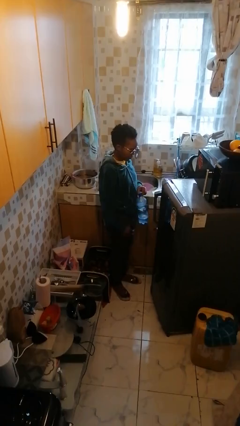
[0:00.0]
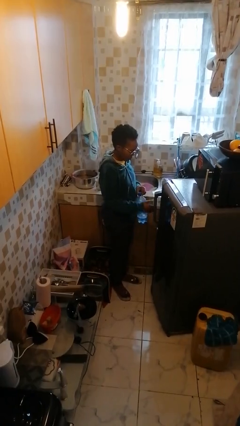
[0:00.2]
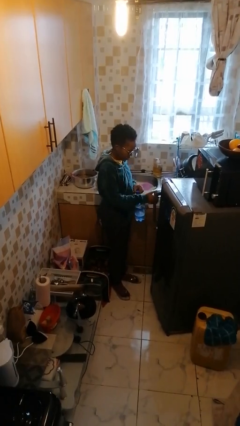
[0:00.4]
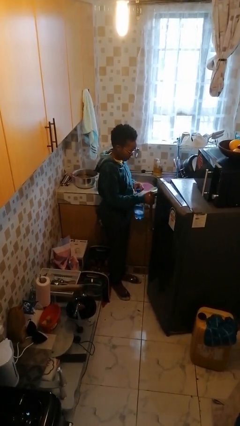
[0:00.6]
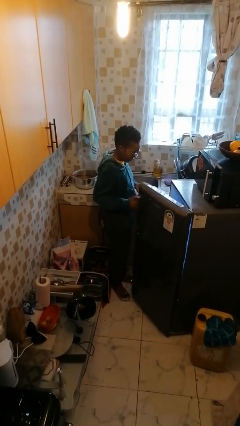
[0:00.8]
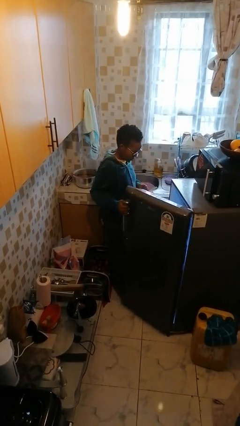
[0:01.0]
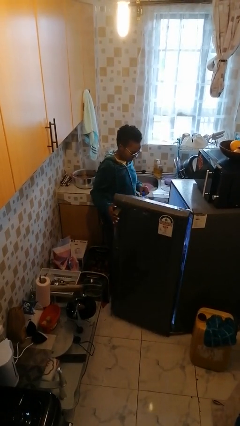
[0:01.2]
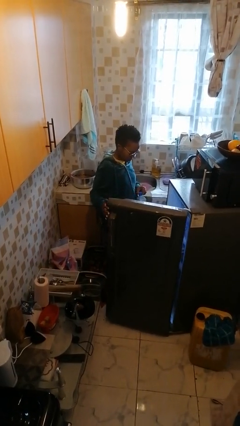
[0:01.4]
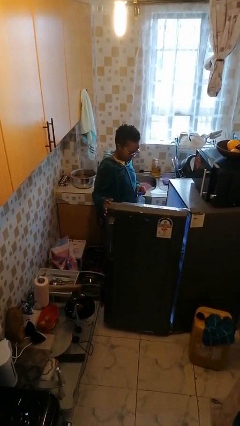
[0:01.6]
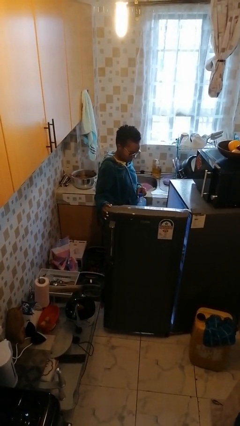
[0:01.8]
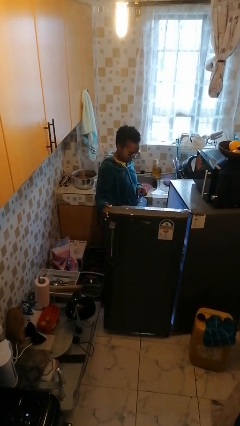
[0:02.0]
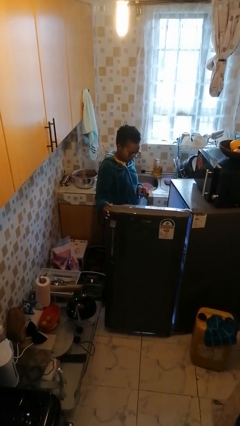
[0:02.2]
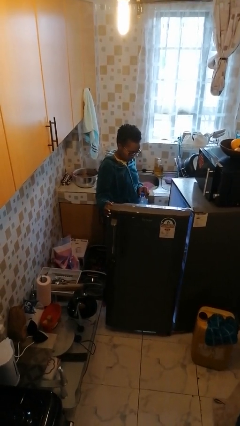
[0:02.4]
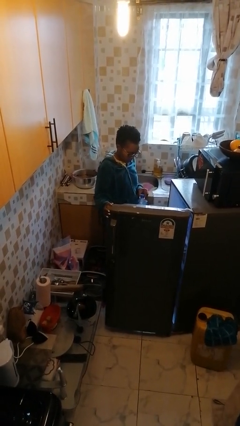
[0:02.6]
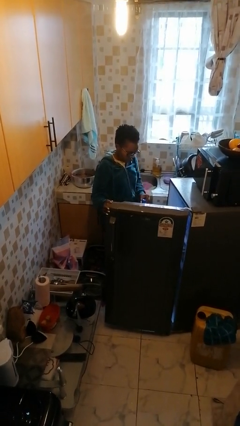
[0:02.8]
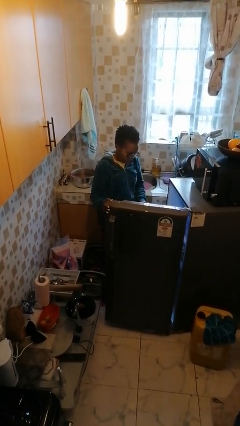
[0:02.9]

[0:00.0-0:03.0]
person opens refrigerator

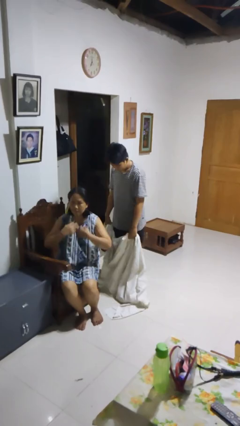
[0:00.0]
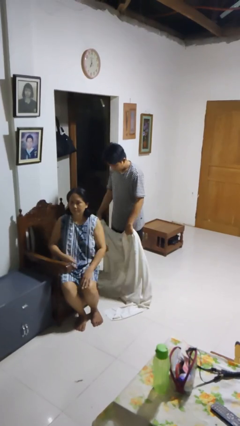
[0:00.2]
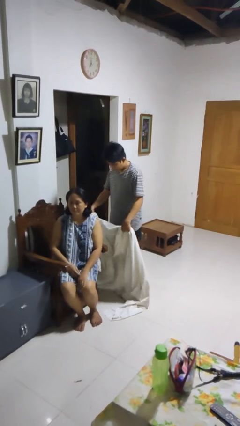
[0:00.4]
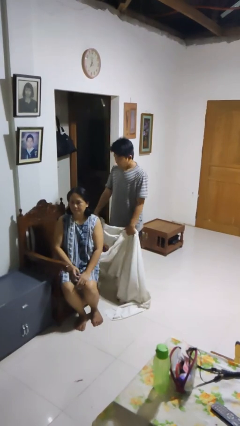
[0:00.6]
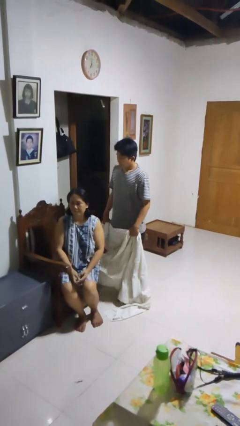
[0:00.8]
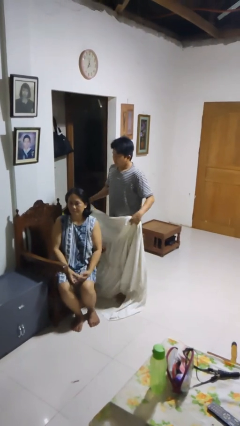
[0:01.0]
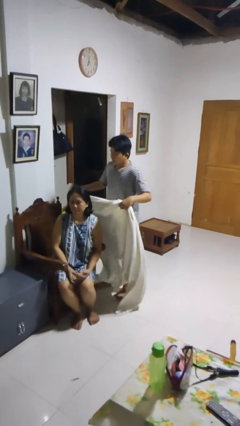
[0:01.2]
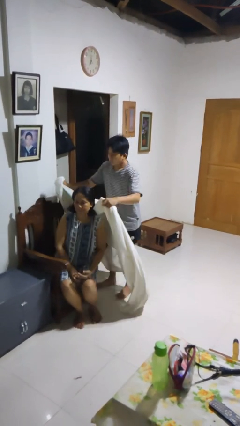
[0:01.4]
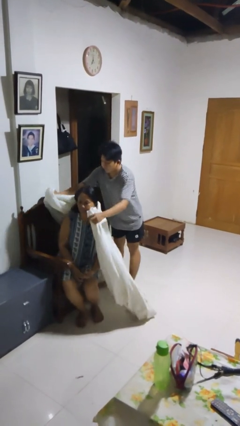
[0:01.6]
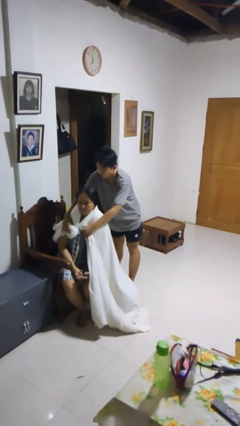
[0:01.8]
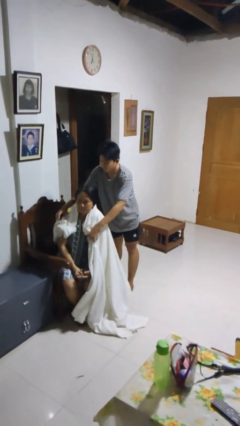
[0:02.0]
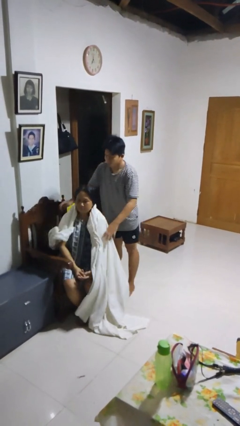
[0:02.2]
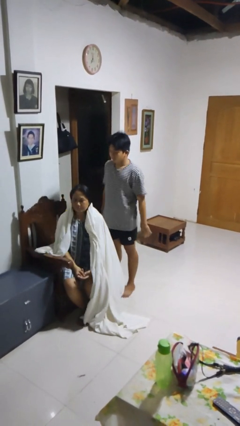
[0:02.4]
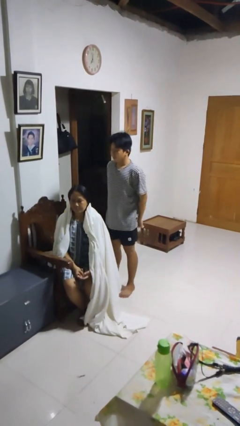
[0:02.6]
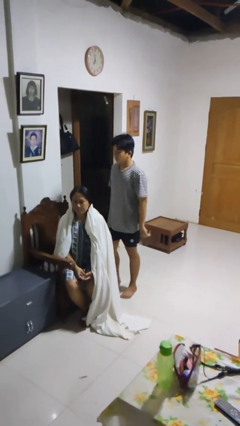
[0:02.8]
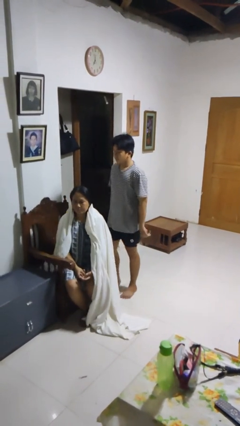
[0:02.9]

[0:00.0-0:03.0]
person covers friend with blanket

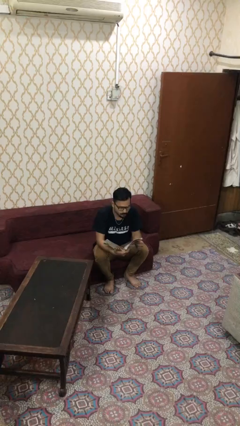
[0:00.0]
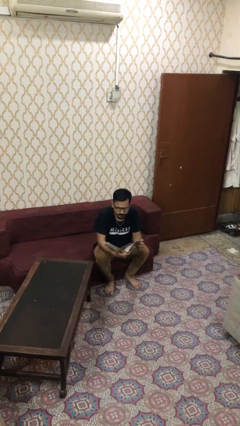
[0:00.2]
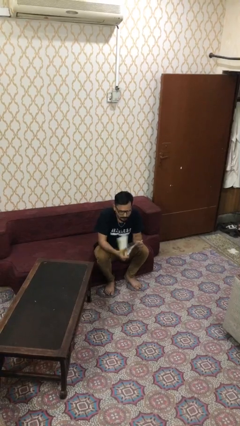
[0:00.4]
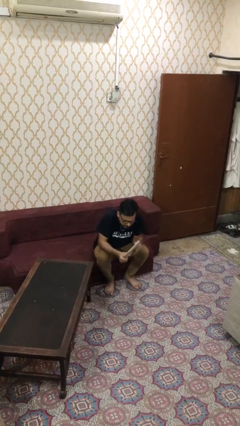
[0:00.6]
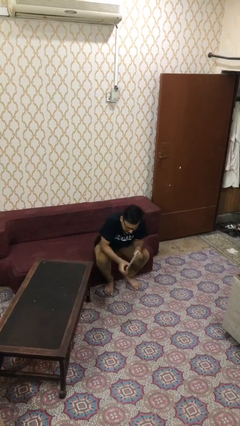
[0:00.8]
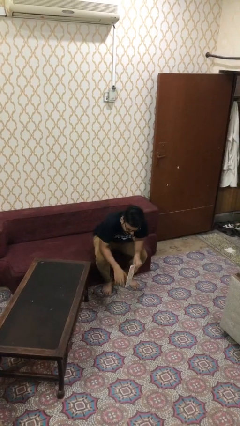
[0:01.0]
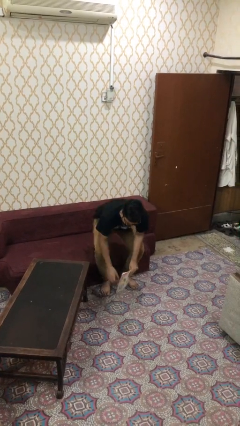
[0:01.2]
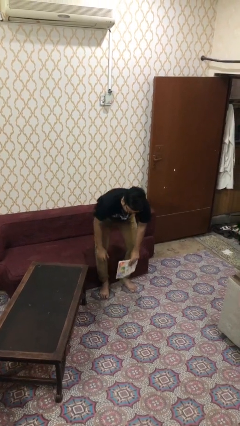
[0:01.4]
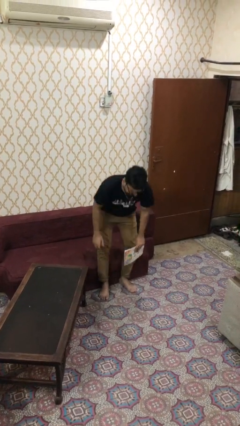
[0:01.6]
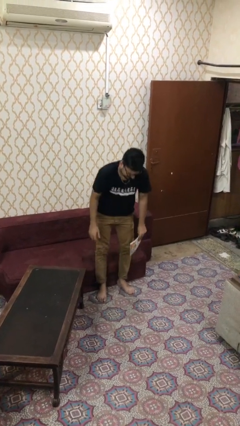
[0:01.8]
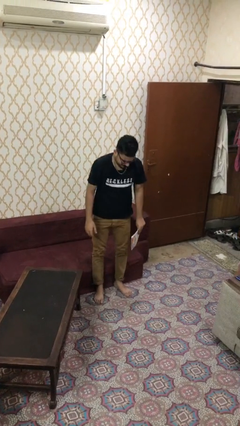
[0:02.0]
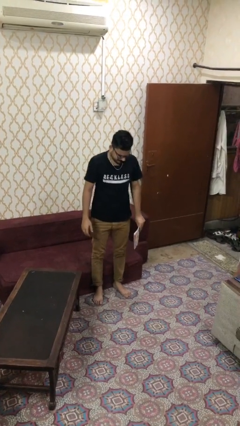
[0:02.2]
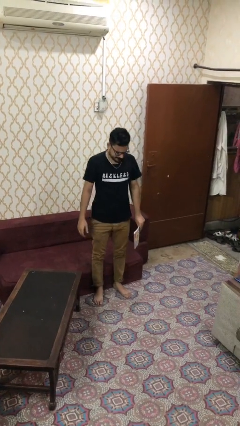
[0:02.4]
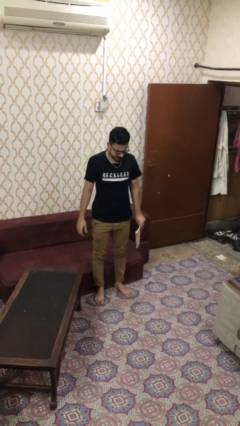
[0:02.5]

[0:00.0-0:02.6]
person stands up

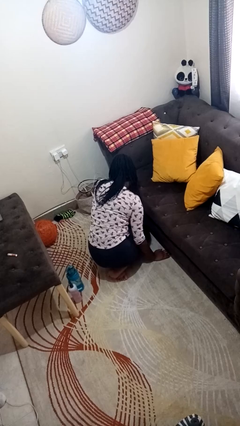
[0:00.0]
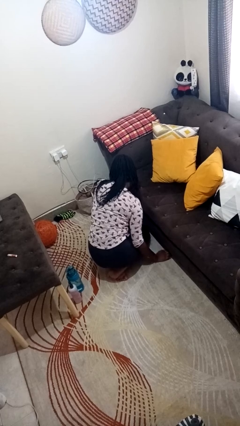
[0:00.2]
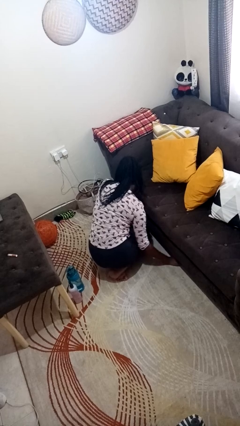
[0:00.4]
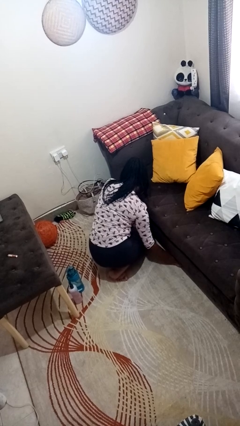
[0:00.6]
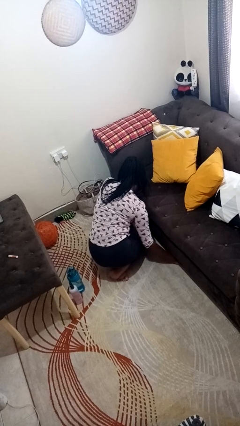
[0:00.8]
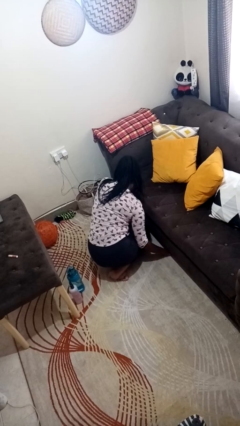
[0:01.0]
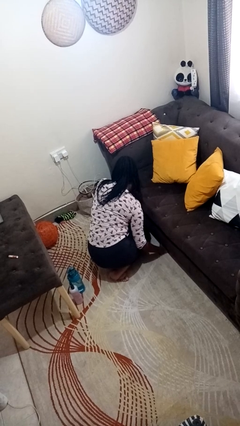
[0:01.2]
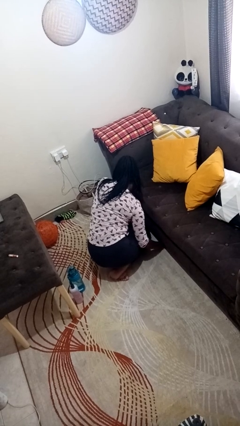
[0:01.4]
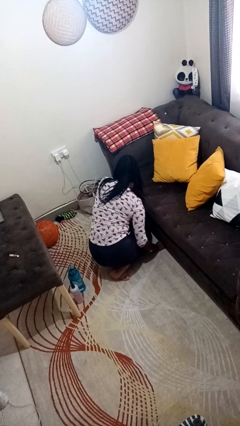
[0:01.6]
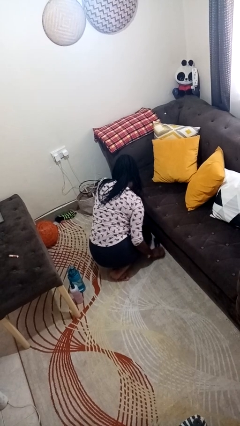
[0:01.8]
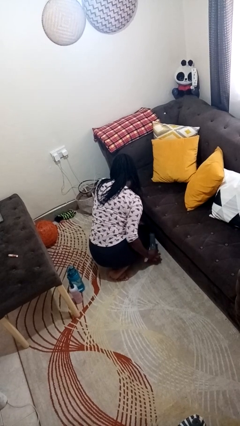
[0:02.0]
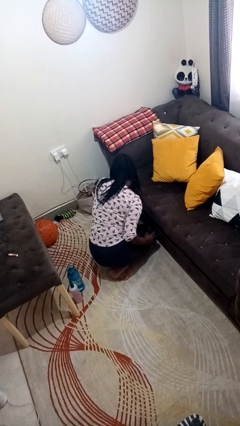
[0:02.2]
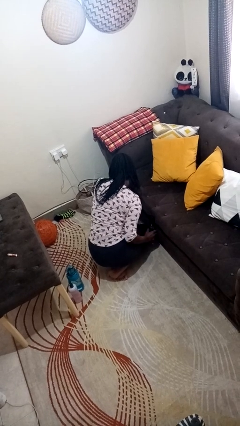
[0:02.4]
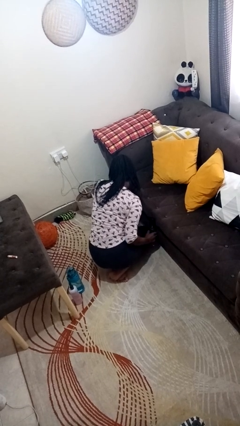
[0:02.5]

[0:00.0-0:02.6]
person searches under couch

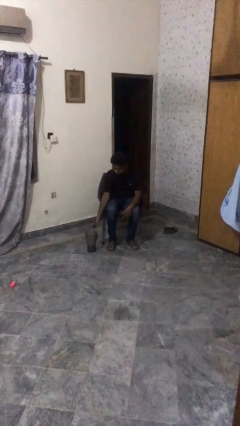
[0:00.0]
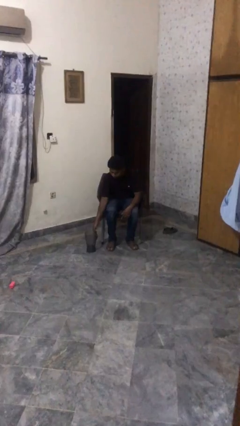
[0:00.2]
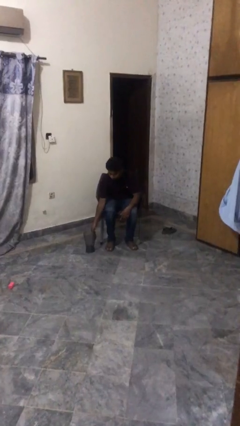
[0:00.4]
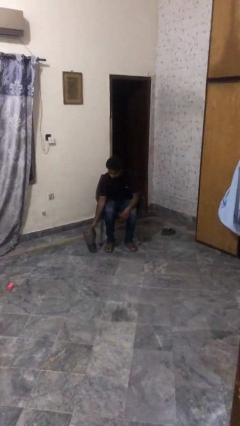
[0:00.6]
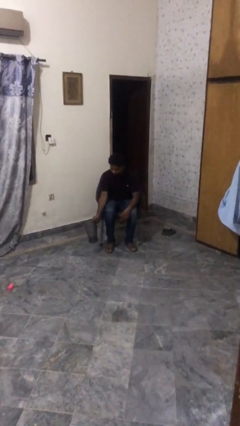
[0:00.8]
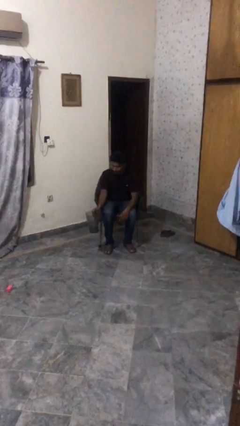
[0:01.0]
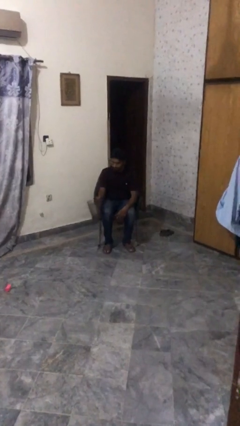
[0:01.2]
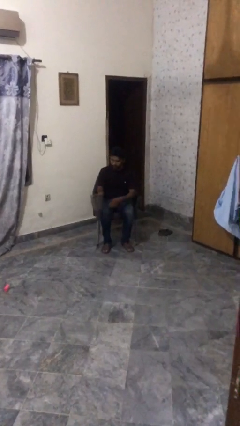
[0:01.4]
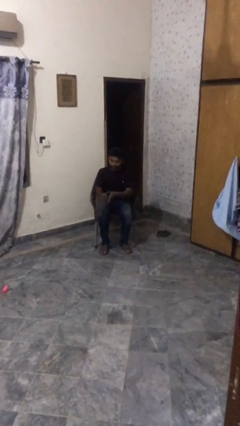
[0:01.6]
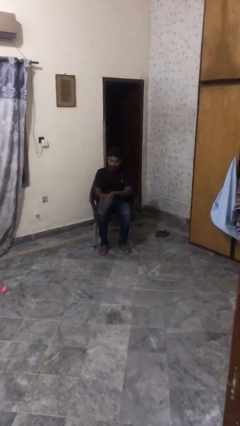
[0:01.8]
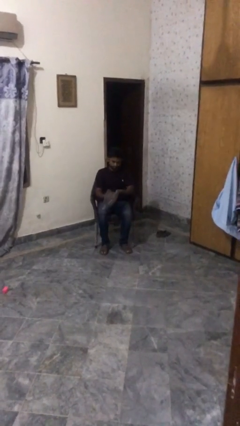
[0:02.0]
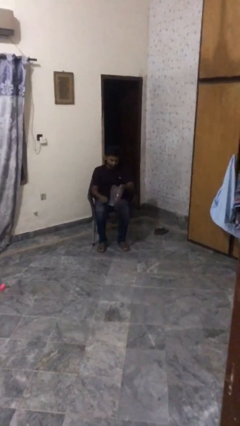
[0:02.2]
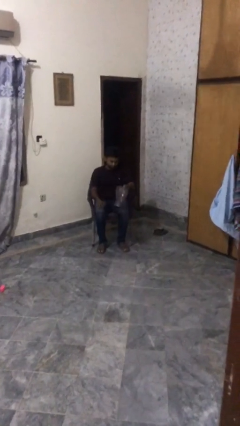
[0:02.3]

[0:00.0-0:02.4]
person picks up object from floor

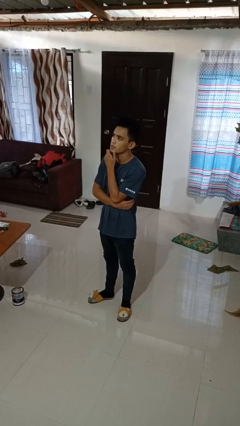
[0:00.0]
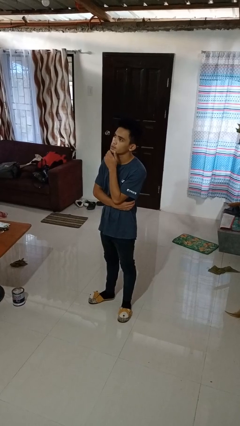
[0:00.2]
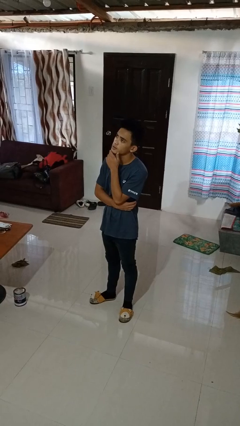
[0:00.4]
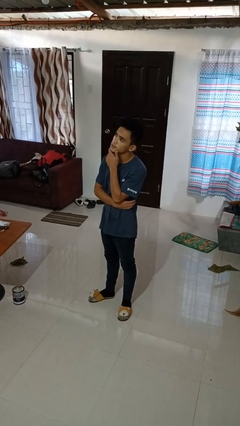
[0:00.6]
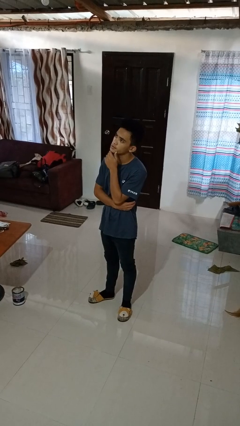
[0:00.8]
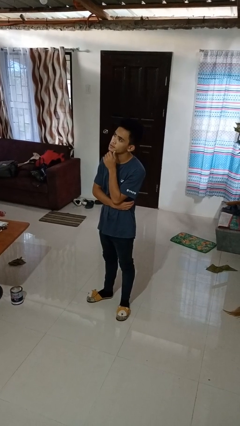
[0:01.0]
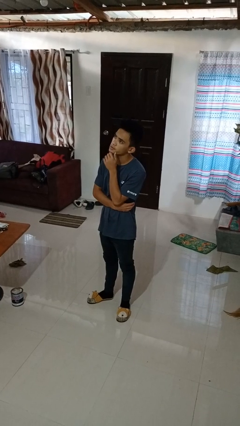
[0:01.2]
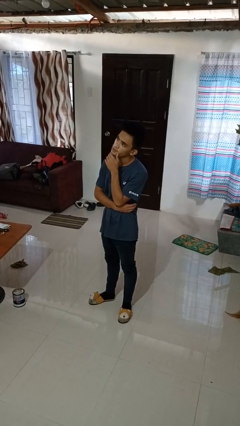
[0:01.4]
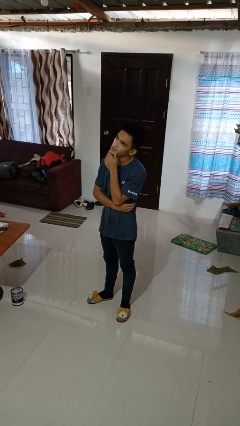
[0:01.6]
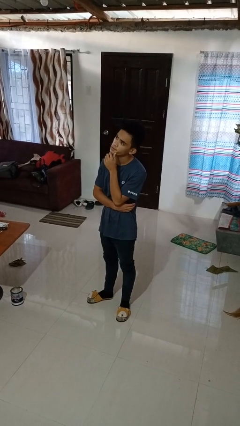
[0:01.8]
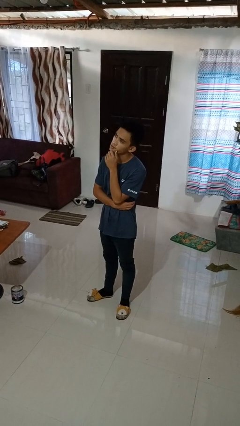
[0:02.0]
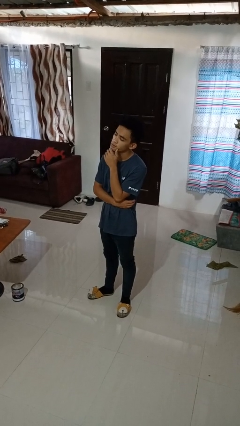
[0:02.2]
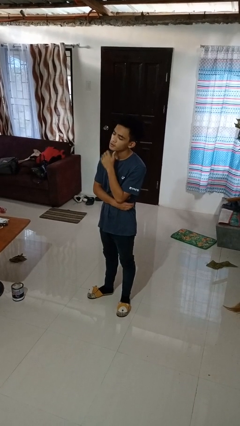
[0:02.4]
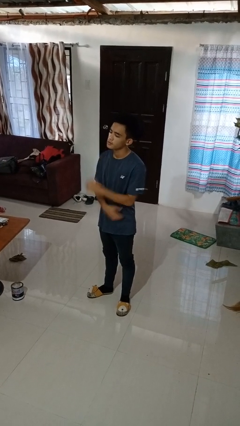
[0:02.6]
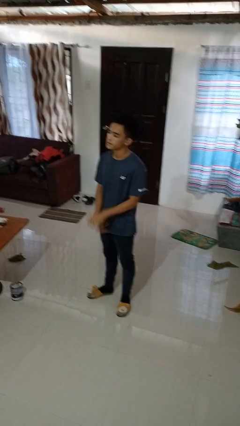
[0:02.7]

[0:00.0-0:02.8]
person strokes chin

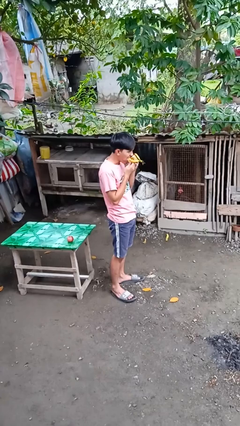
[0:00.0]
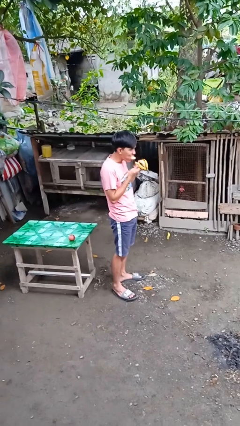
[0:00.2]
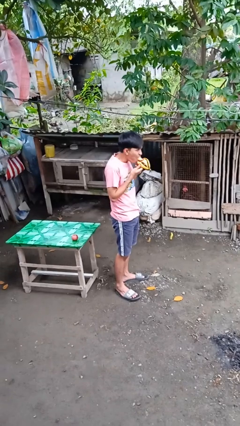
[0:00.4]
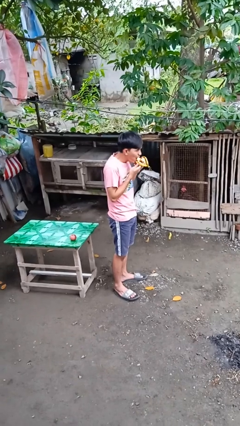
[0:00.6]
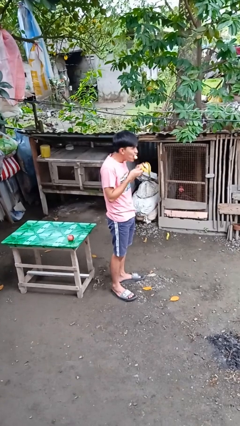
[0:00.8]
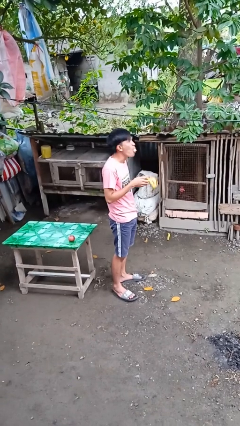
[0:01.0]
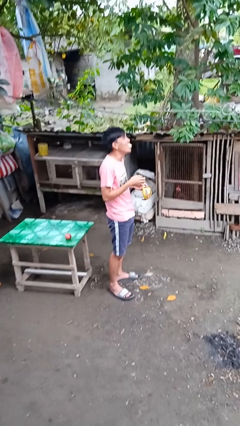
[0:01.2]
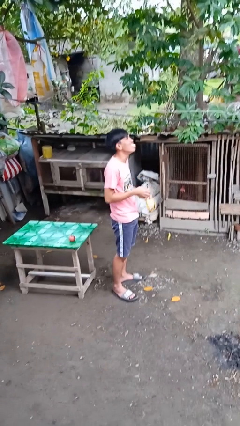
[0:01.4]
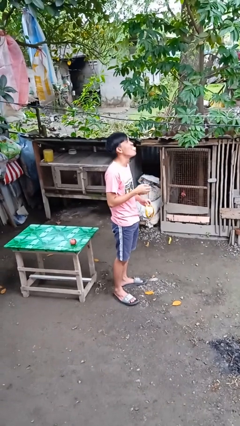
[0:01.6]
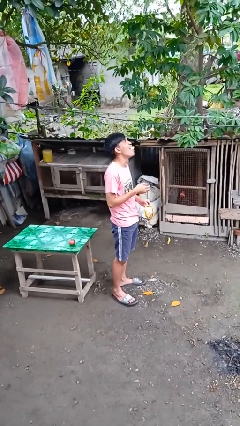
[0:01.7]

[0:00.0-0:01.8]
person eats banana
